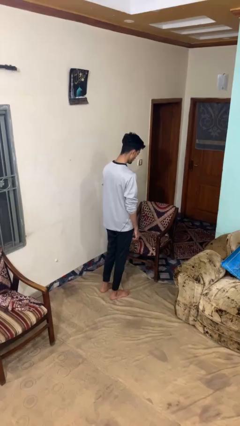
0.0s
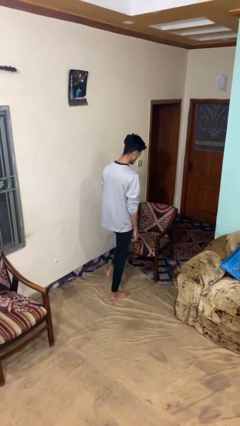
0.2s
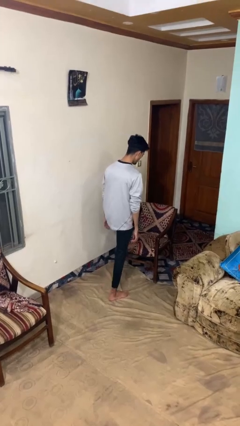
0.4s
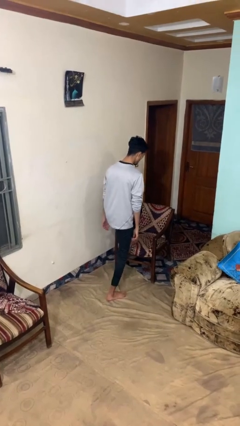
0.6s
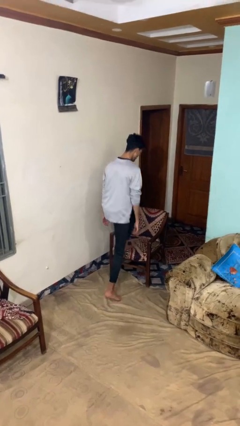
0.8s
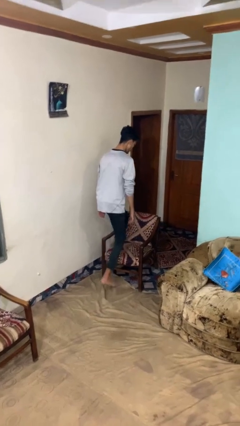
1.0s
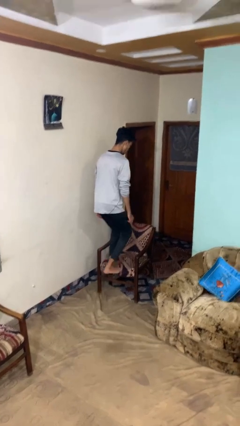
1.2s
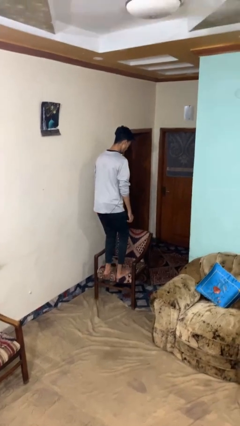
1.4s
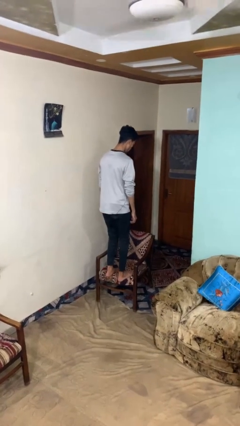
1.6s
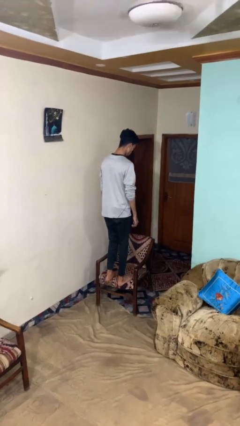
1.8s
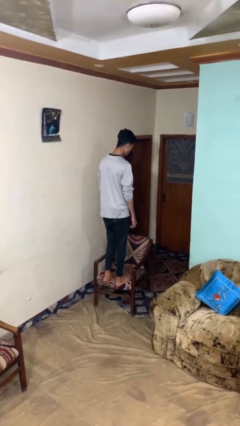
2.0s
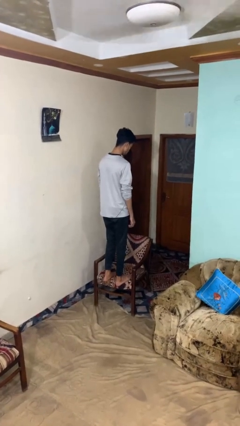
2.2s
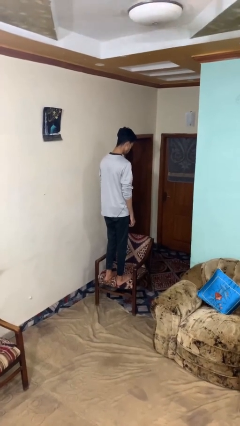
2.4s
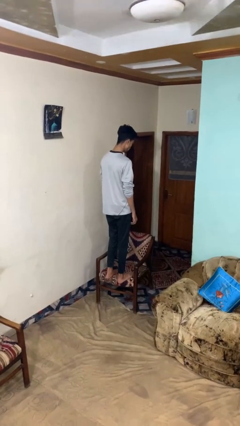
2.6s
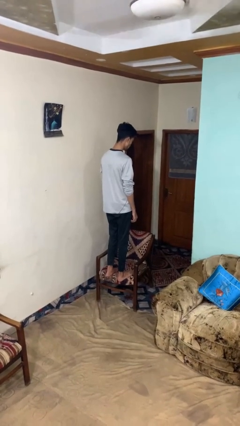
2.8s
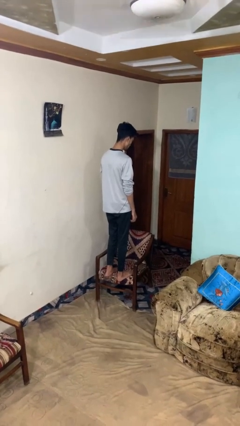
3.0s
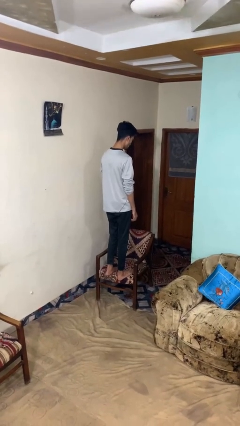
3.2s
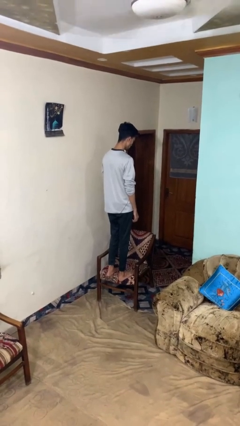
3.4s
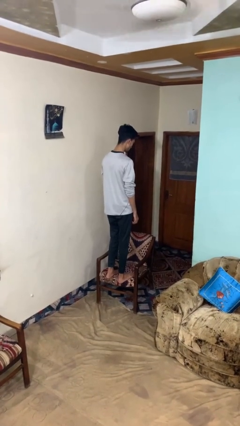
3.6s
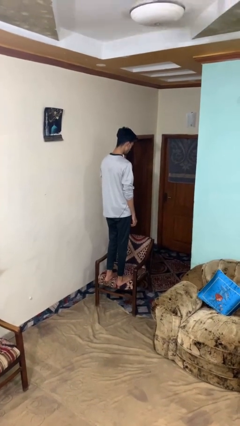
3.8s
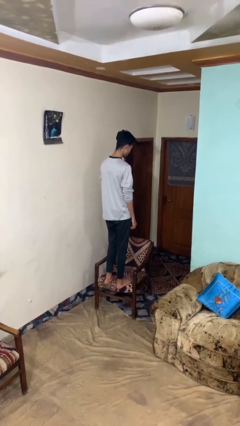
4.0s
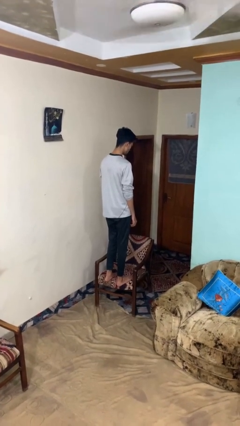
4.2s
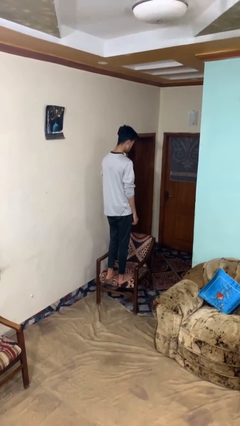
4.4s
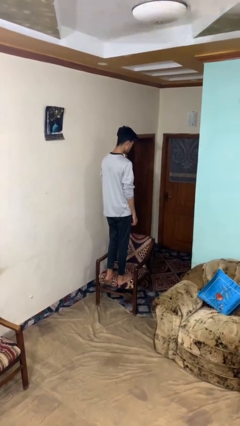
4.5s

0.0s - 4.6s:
person climbs on chair

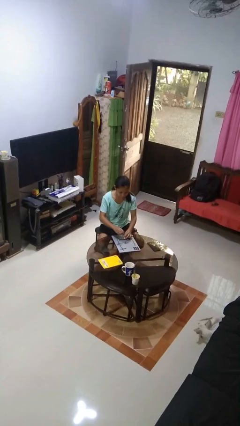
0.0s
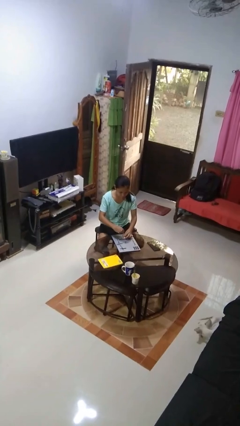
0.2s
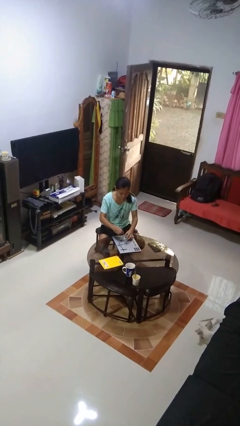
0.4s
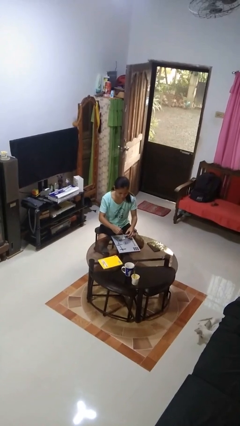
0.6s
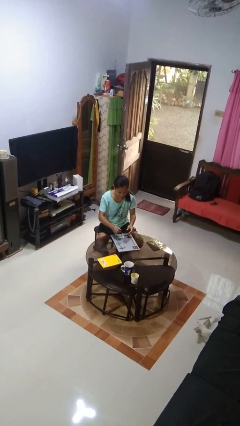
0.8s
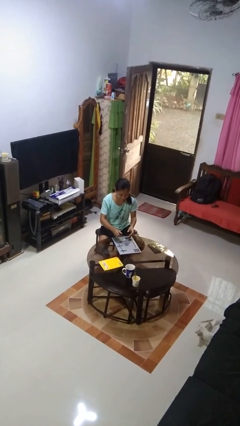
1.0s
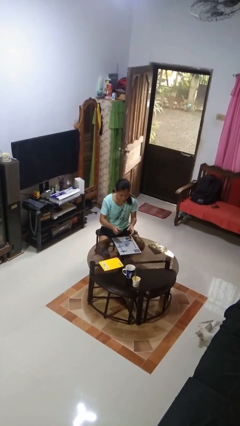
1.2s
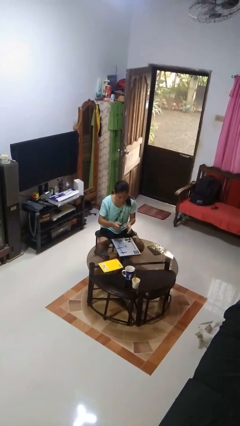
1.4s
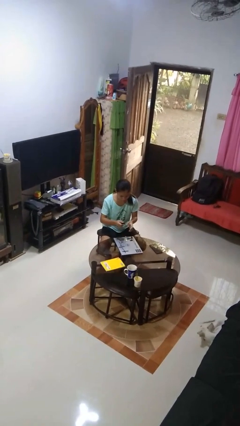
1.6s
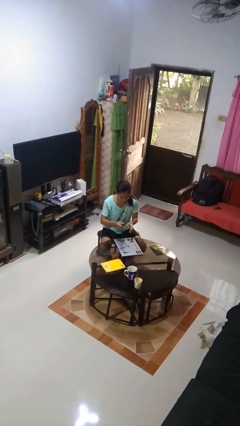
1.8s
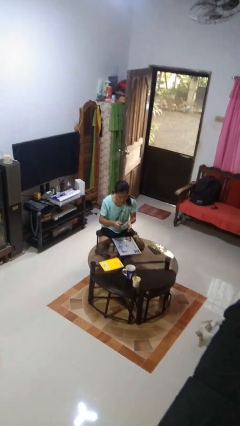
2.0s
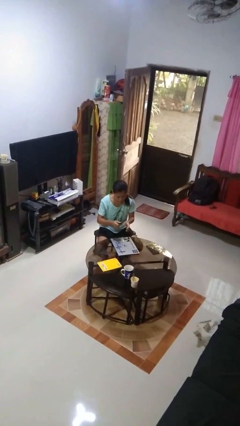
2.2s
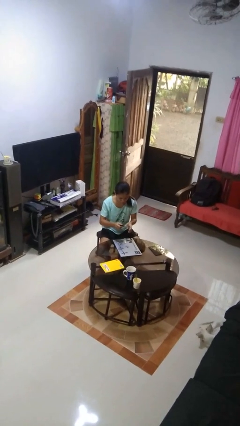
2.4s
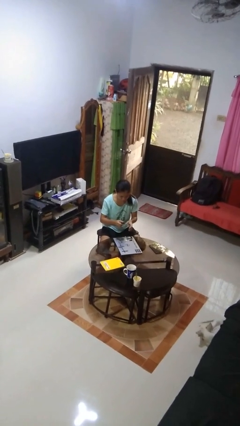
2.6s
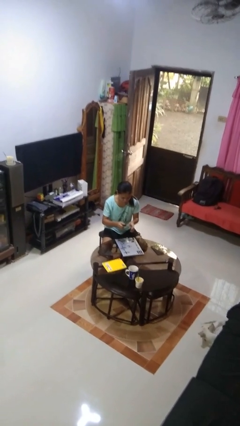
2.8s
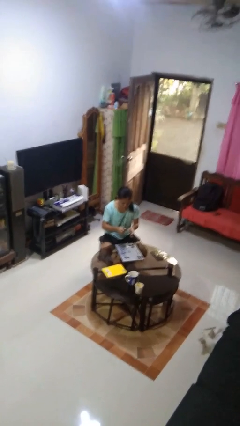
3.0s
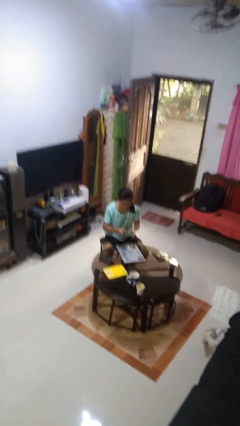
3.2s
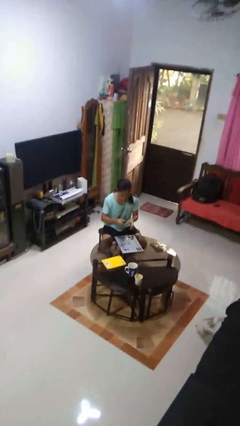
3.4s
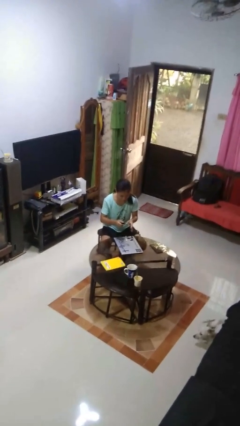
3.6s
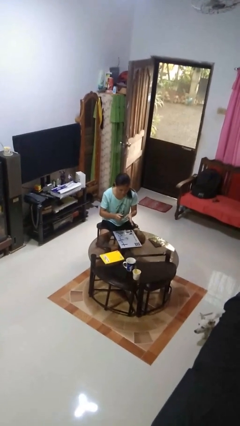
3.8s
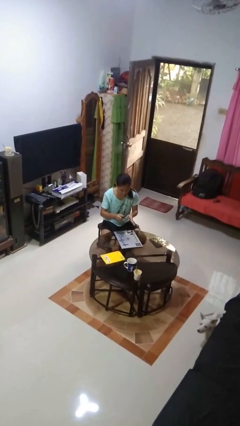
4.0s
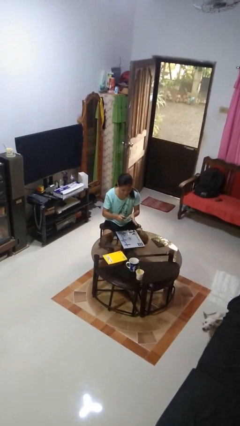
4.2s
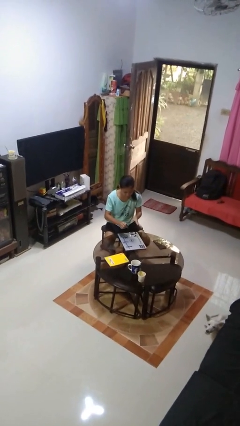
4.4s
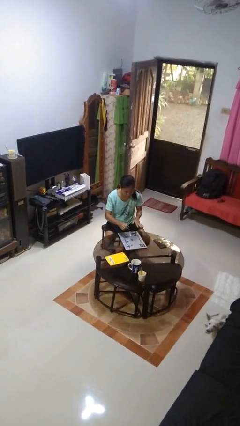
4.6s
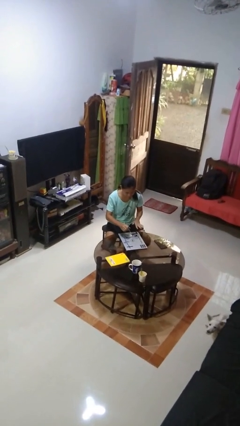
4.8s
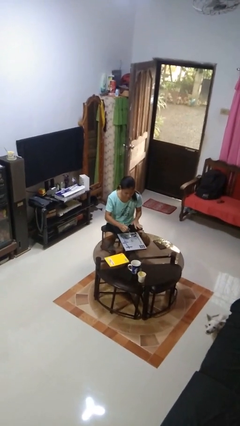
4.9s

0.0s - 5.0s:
person paints fingernails

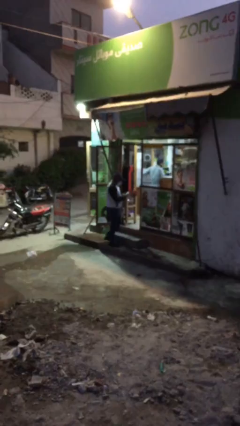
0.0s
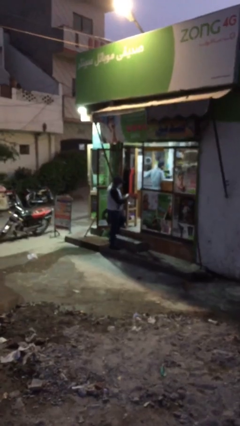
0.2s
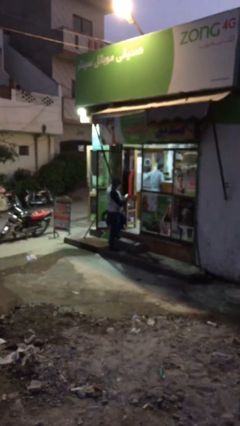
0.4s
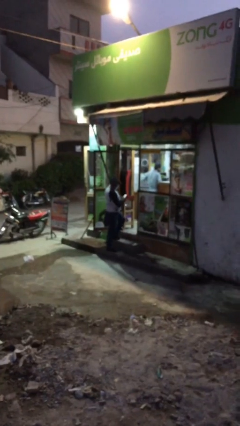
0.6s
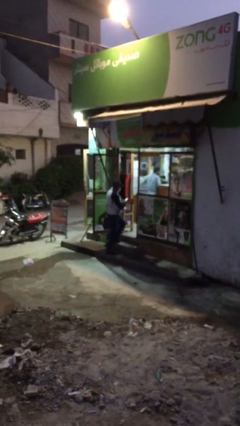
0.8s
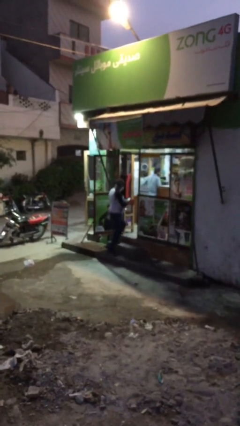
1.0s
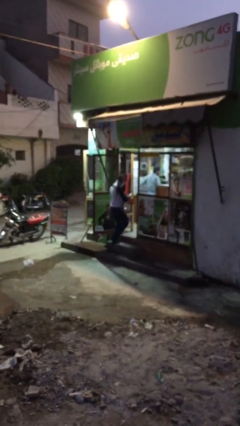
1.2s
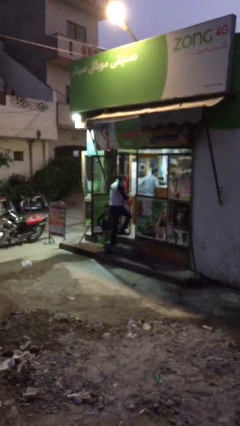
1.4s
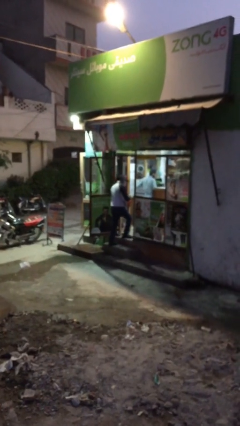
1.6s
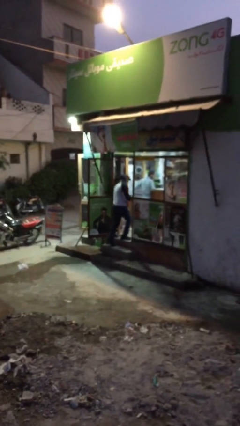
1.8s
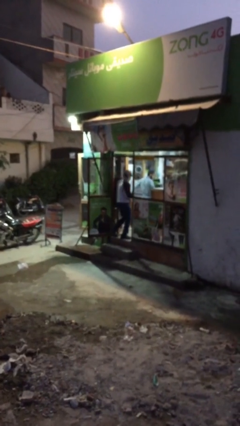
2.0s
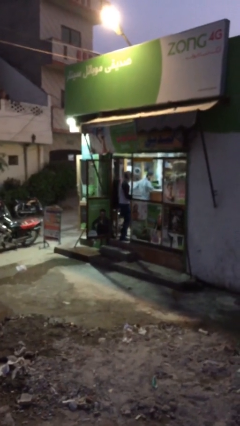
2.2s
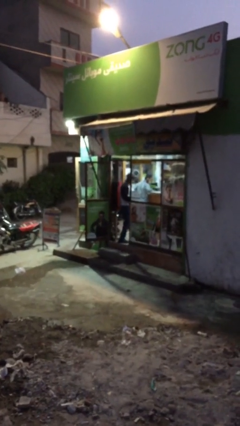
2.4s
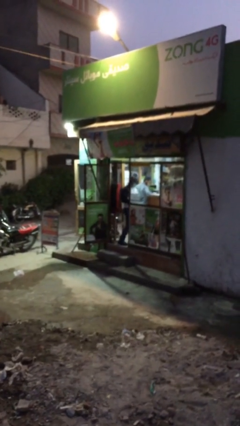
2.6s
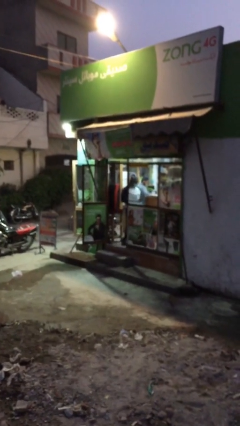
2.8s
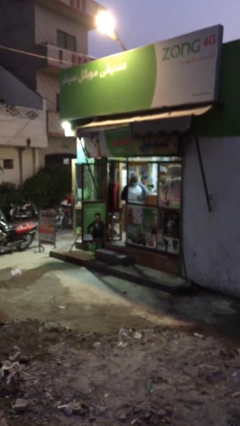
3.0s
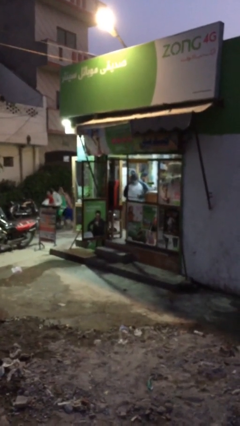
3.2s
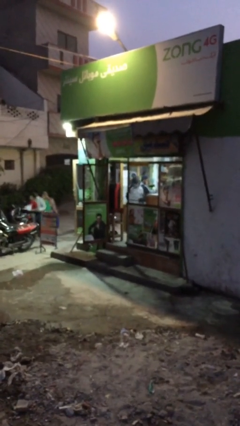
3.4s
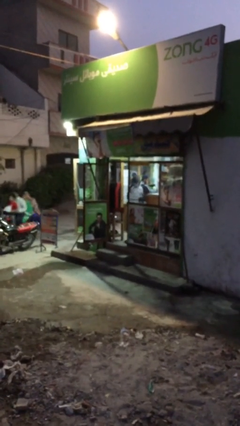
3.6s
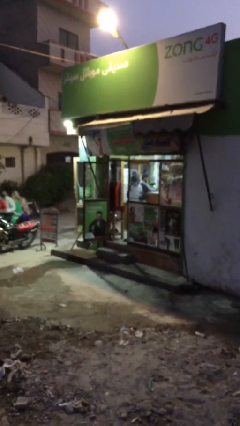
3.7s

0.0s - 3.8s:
person enters scene through structure

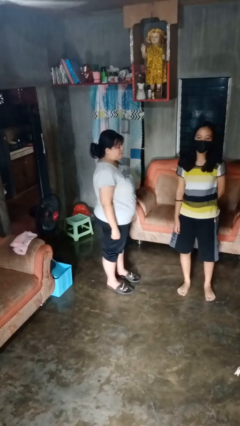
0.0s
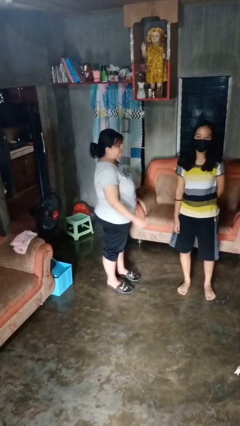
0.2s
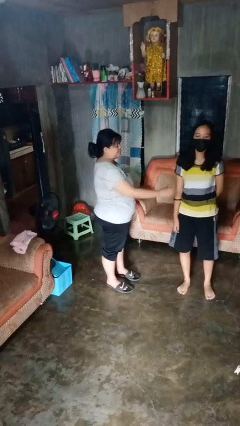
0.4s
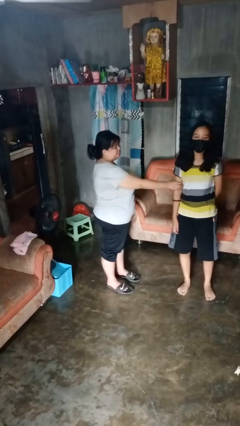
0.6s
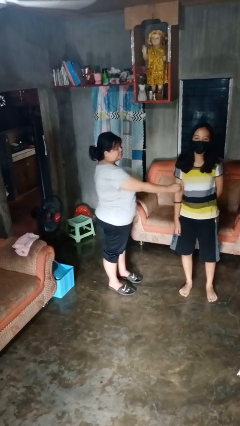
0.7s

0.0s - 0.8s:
person grabs person by bicep

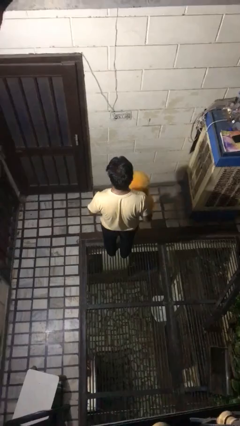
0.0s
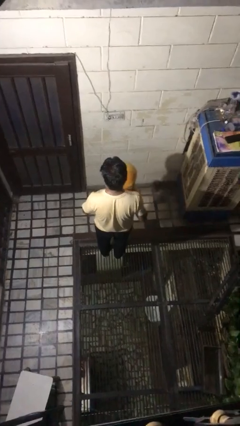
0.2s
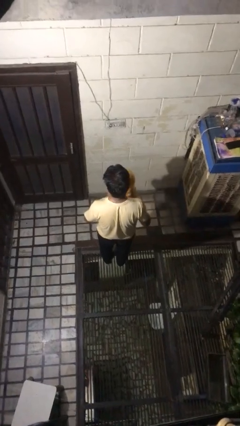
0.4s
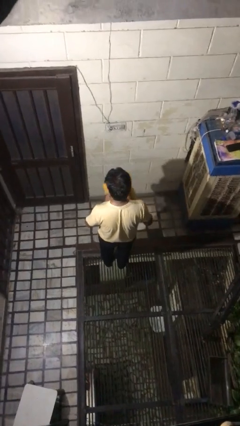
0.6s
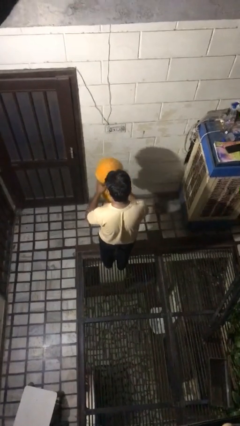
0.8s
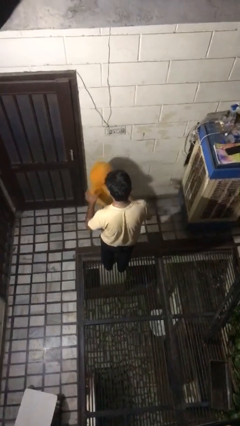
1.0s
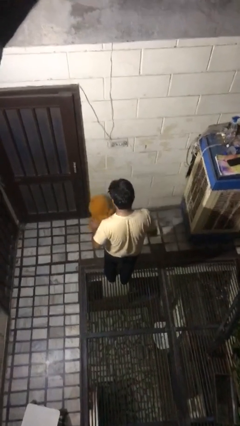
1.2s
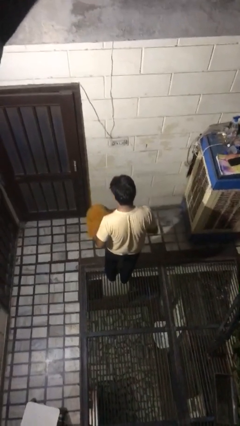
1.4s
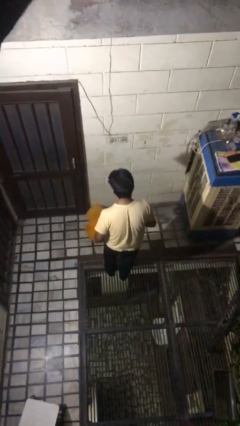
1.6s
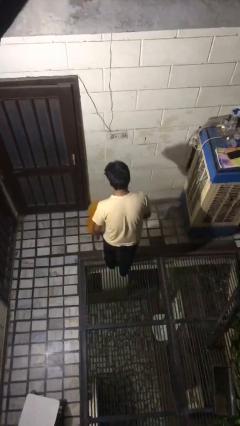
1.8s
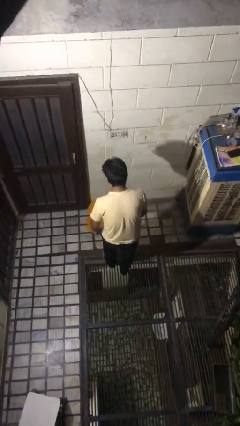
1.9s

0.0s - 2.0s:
person throws object into air

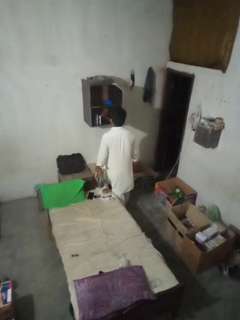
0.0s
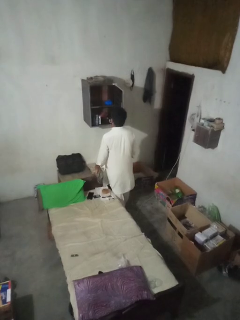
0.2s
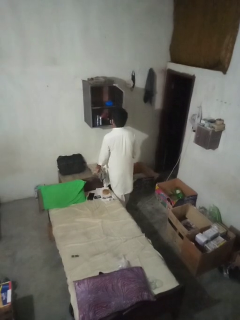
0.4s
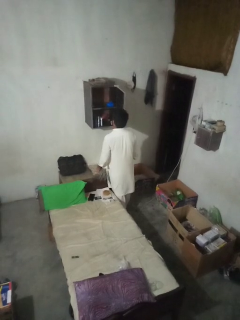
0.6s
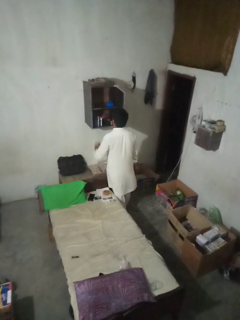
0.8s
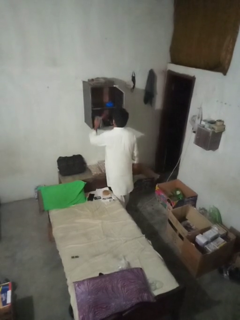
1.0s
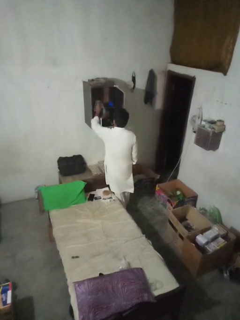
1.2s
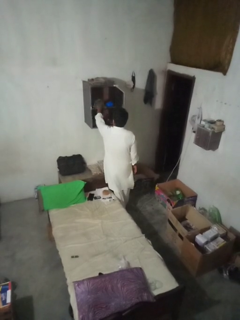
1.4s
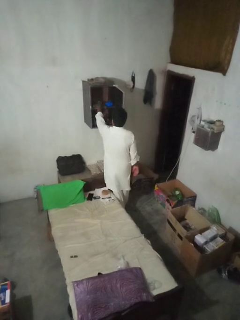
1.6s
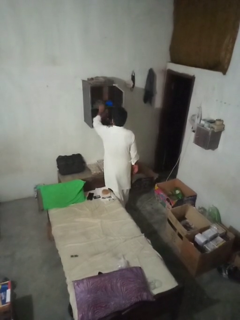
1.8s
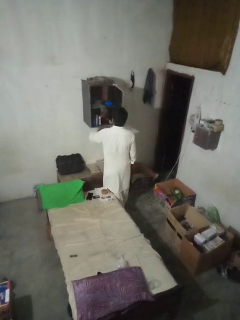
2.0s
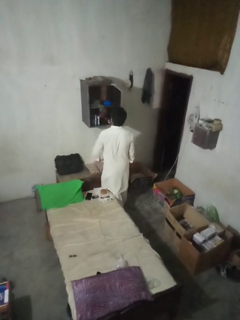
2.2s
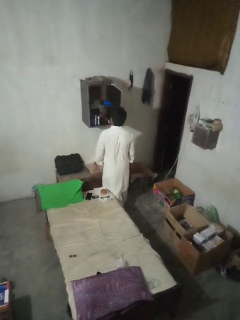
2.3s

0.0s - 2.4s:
person puts clothes into dresser
